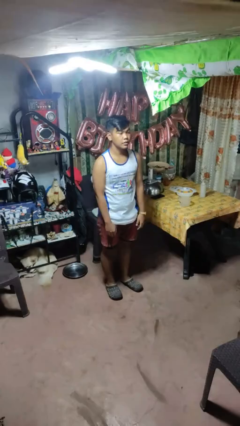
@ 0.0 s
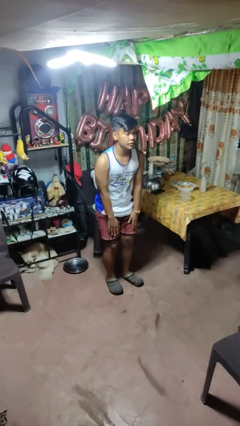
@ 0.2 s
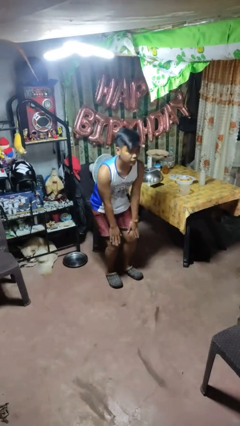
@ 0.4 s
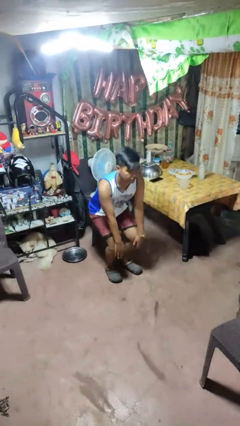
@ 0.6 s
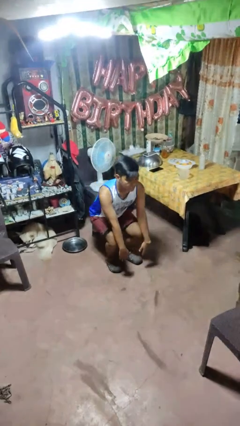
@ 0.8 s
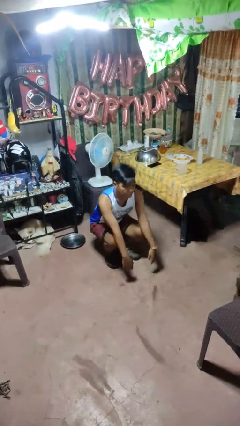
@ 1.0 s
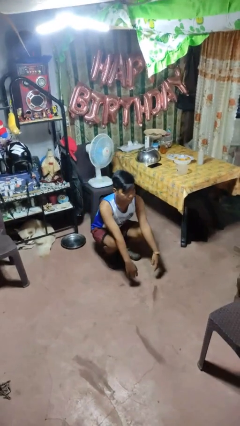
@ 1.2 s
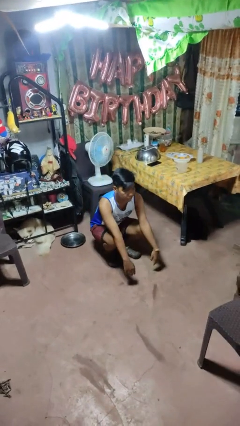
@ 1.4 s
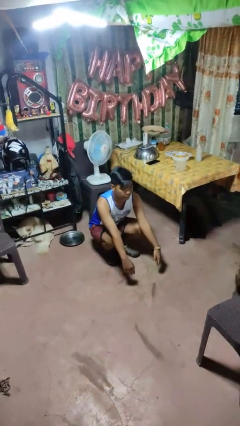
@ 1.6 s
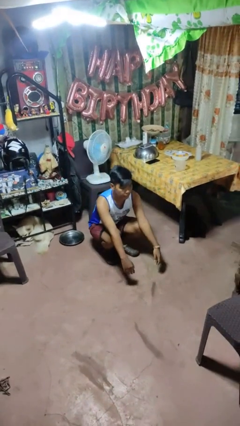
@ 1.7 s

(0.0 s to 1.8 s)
person squats

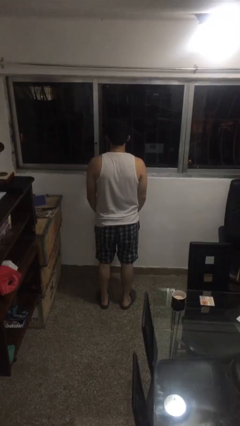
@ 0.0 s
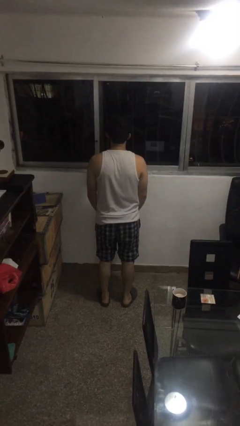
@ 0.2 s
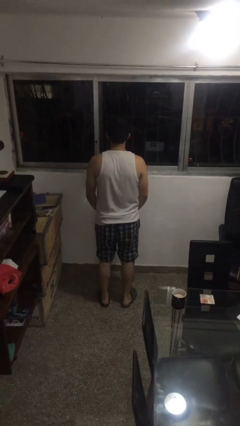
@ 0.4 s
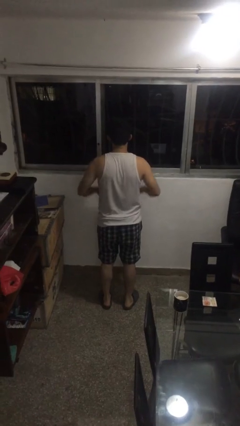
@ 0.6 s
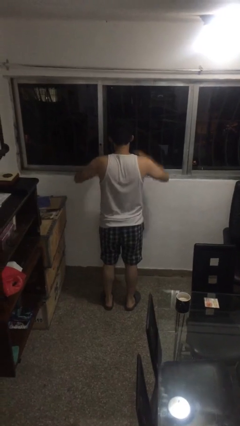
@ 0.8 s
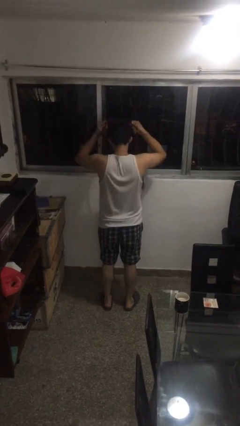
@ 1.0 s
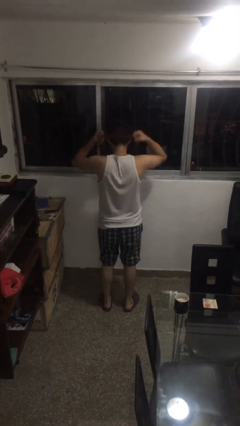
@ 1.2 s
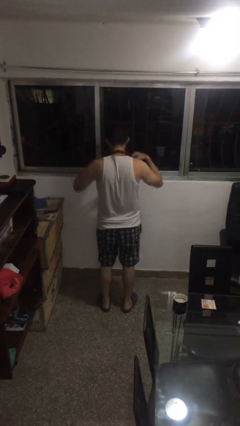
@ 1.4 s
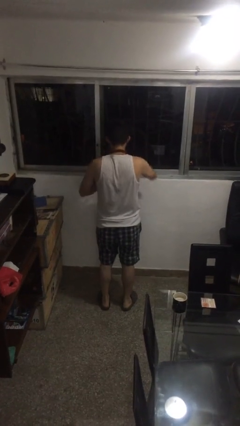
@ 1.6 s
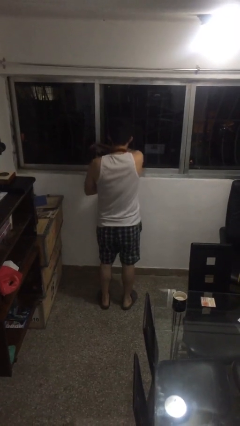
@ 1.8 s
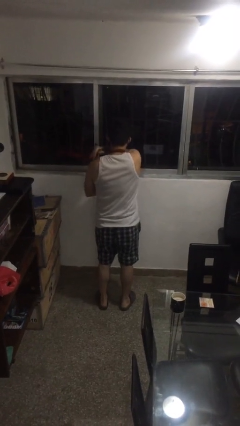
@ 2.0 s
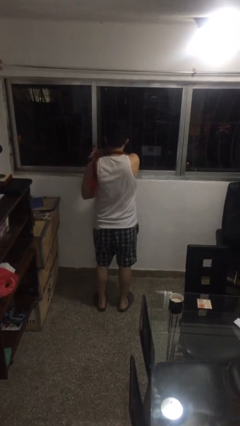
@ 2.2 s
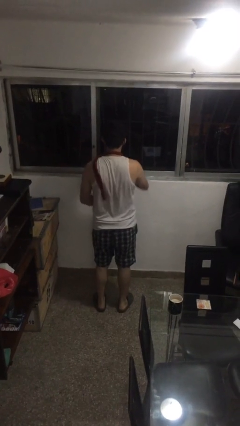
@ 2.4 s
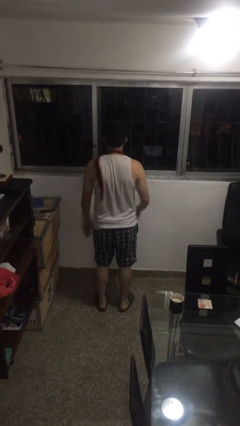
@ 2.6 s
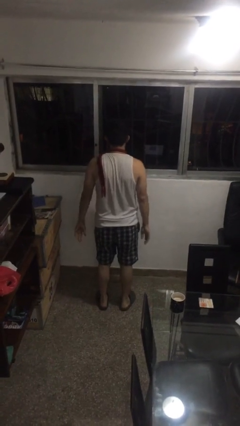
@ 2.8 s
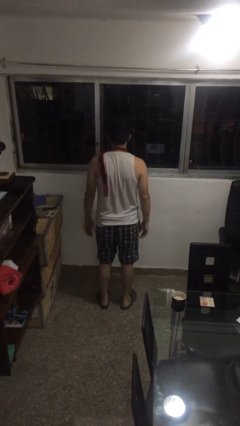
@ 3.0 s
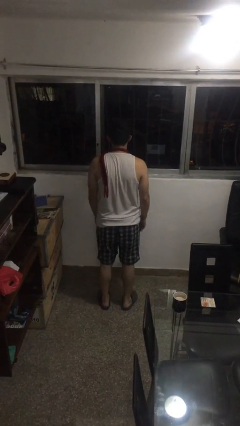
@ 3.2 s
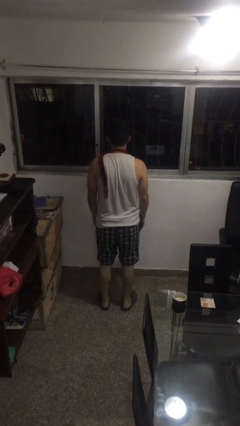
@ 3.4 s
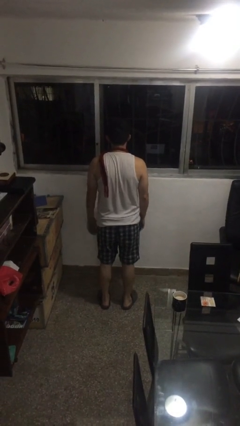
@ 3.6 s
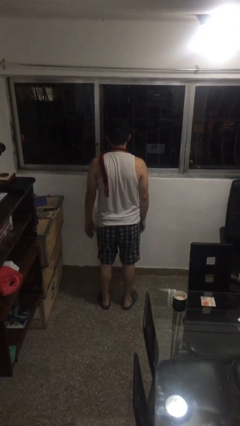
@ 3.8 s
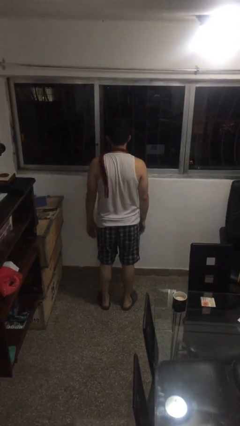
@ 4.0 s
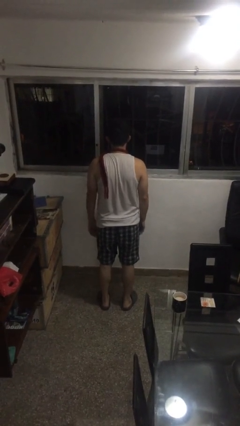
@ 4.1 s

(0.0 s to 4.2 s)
person puts on scarf

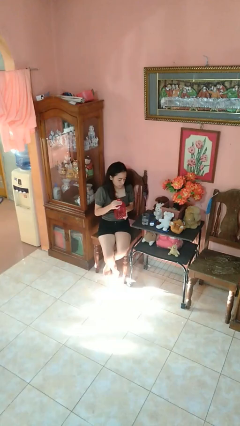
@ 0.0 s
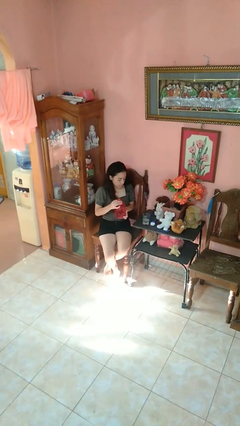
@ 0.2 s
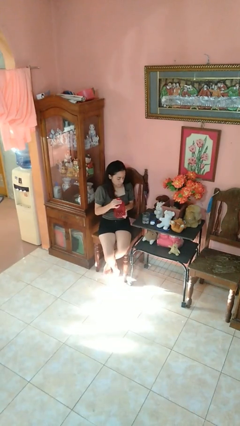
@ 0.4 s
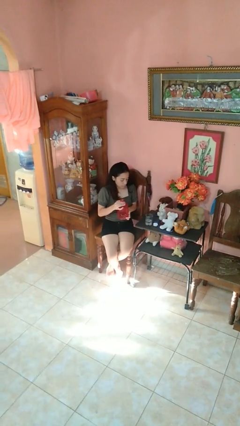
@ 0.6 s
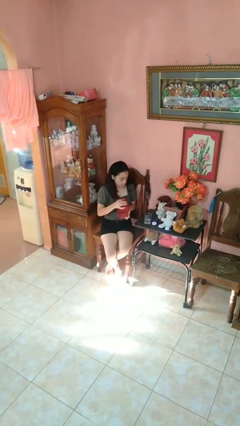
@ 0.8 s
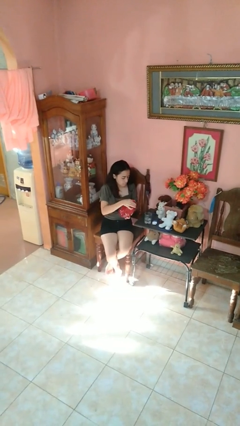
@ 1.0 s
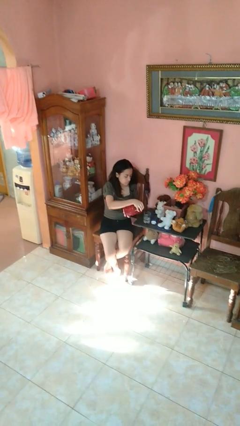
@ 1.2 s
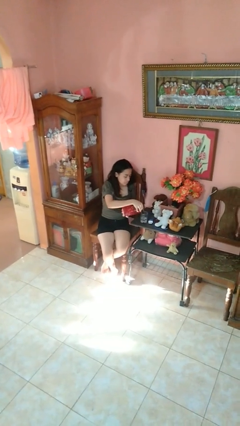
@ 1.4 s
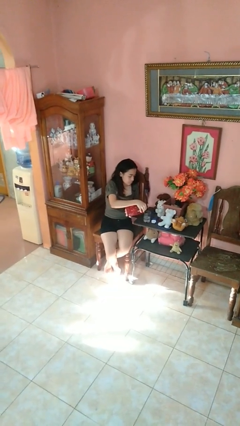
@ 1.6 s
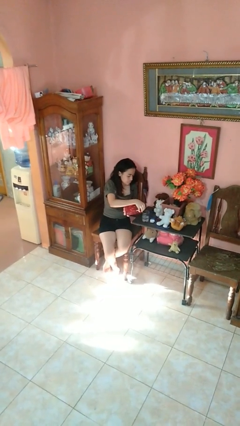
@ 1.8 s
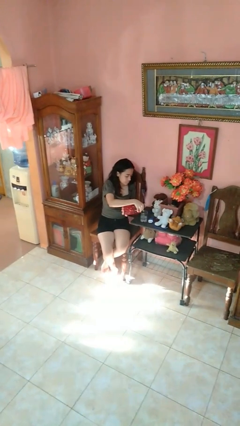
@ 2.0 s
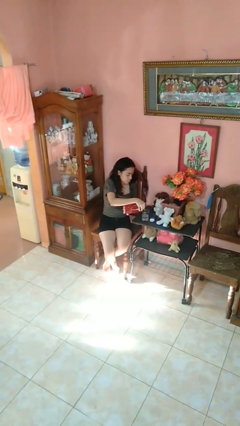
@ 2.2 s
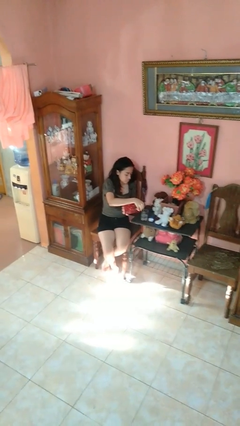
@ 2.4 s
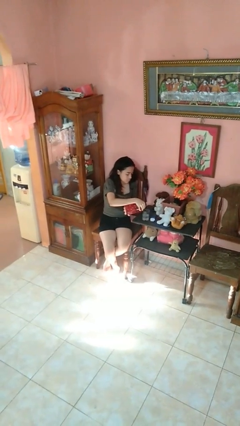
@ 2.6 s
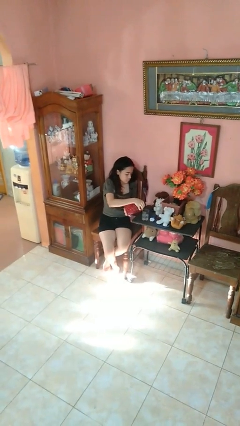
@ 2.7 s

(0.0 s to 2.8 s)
person pours liquid into cup

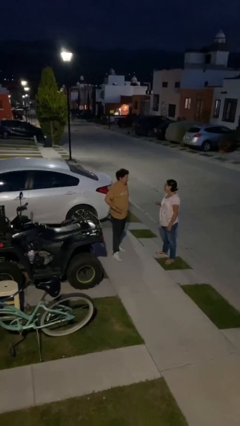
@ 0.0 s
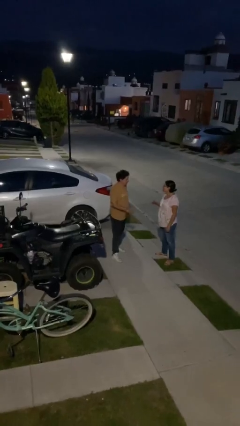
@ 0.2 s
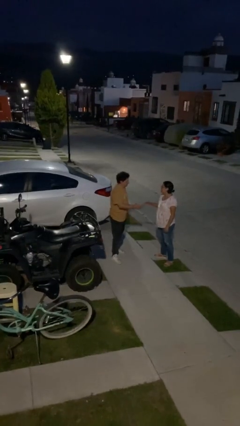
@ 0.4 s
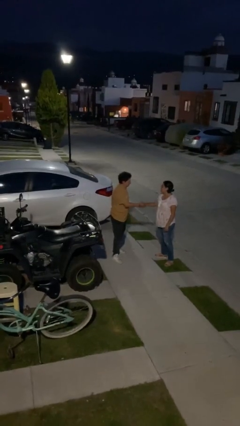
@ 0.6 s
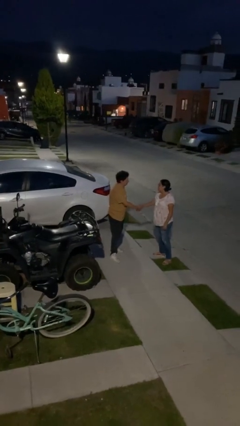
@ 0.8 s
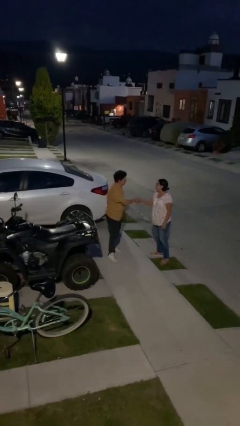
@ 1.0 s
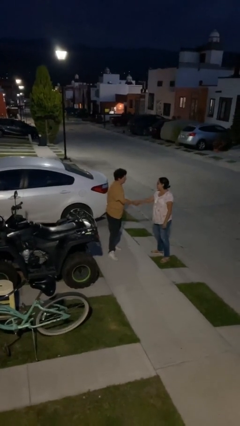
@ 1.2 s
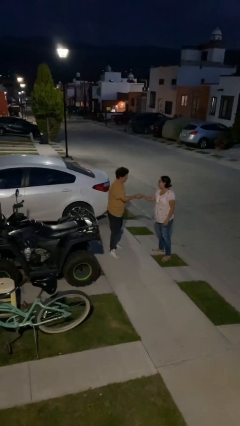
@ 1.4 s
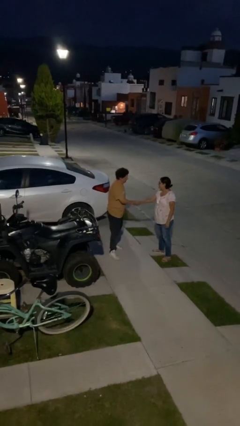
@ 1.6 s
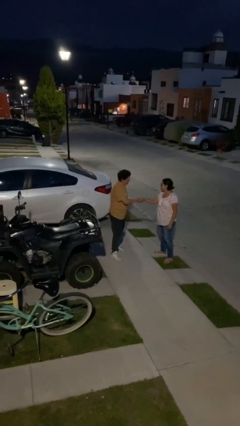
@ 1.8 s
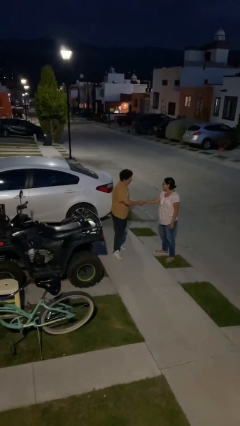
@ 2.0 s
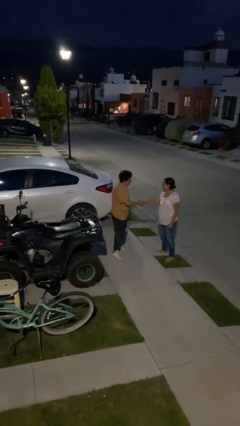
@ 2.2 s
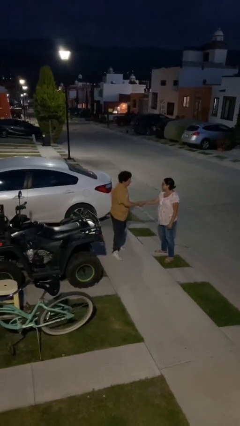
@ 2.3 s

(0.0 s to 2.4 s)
person shakes hand

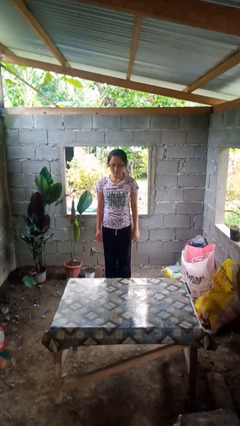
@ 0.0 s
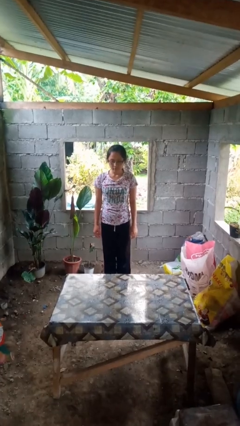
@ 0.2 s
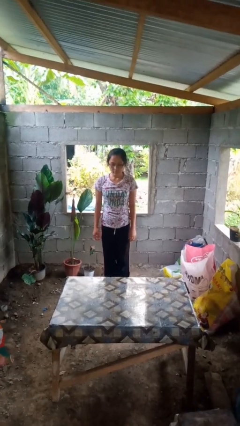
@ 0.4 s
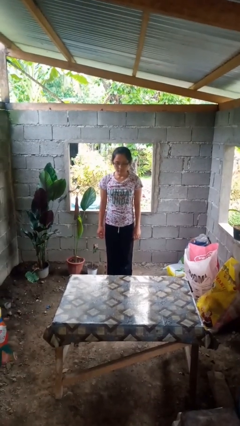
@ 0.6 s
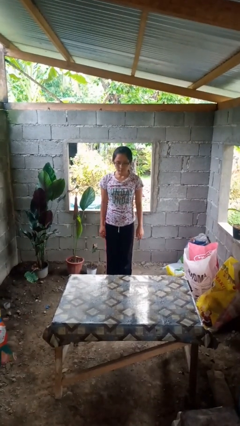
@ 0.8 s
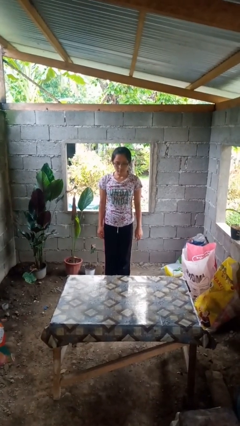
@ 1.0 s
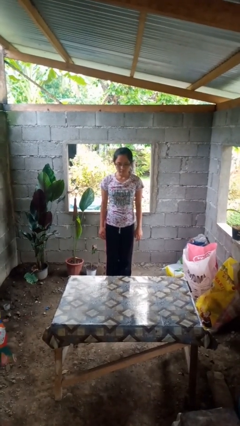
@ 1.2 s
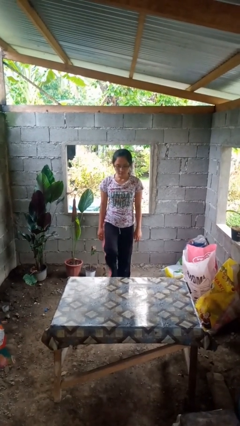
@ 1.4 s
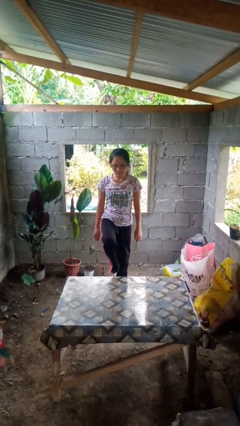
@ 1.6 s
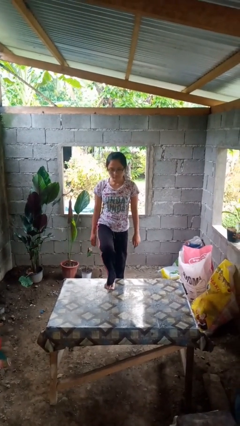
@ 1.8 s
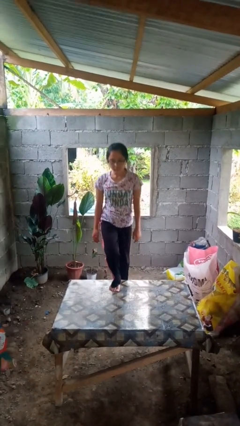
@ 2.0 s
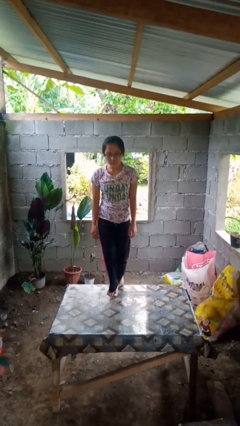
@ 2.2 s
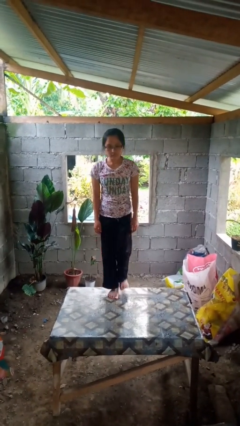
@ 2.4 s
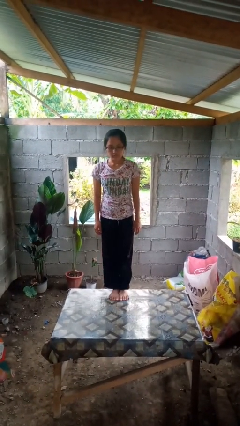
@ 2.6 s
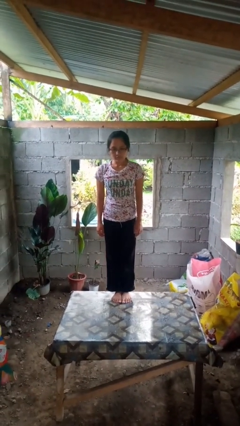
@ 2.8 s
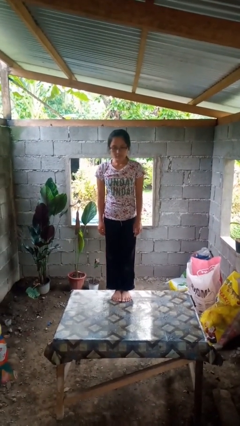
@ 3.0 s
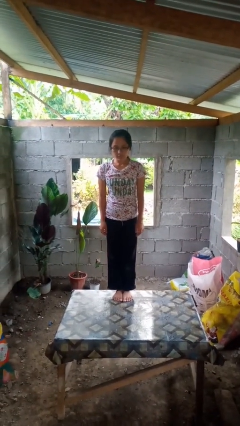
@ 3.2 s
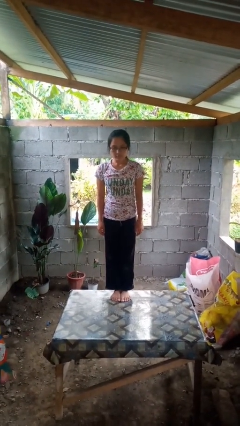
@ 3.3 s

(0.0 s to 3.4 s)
person climbs on table

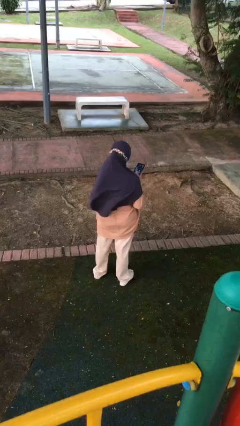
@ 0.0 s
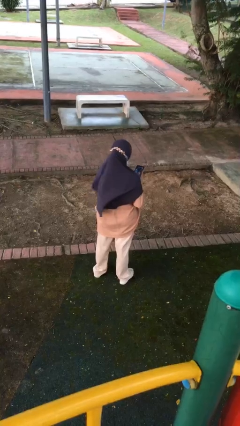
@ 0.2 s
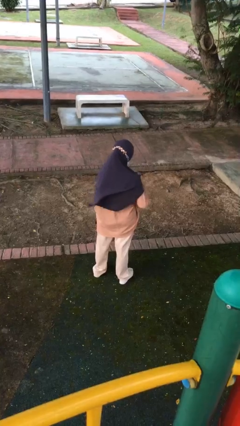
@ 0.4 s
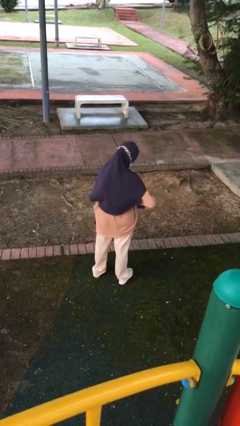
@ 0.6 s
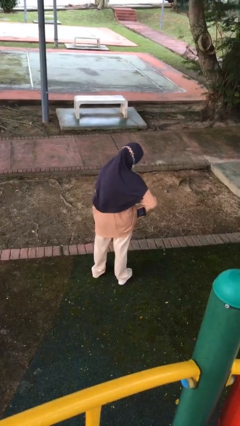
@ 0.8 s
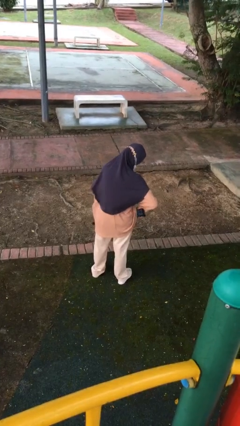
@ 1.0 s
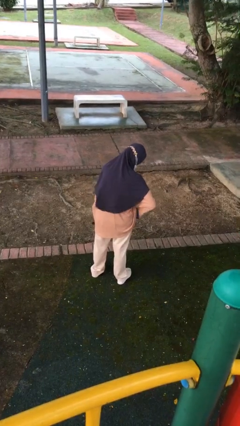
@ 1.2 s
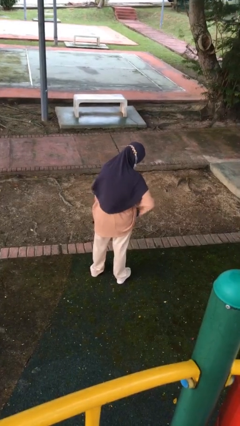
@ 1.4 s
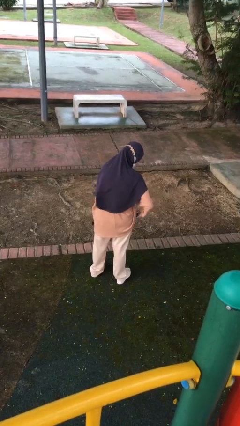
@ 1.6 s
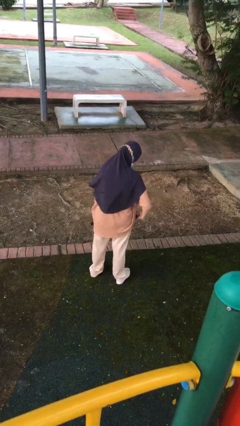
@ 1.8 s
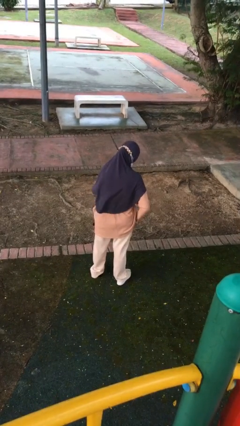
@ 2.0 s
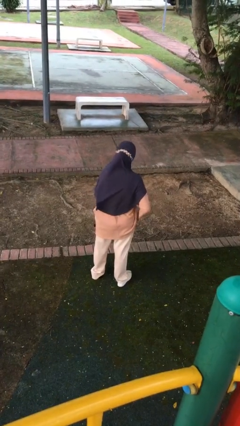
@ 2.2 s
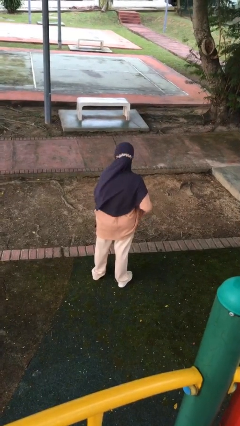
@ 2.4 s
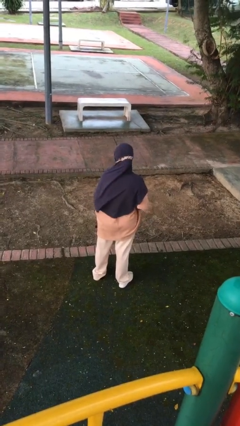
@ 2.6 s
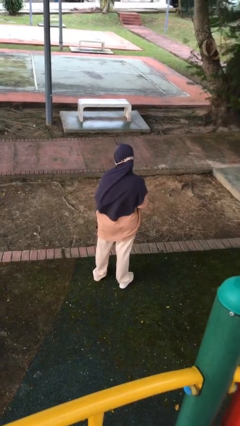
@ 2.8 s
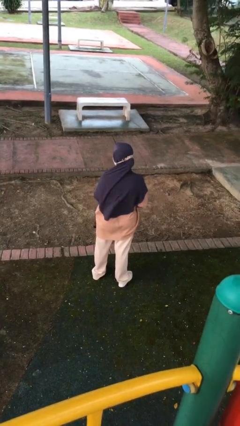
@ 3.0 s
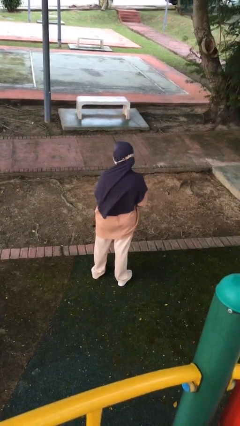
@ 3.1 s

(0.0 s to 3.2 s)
person puts phone into pocket
